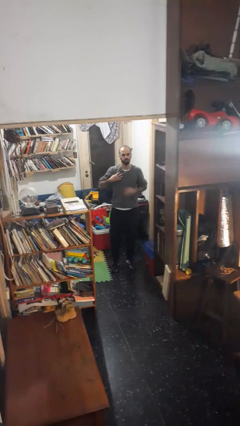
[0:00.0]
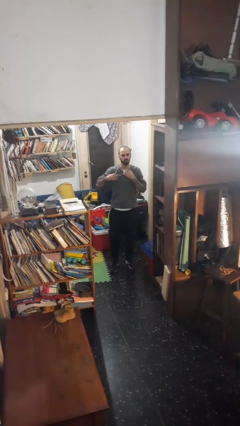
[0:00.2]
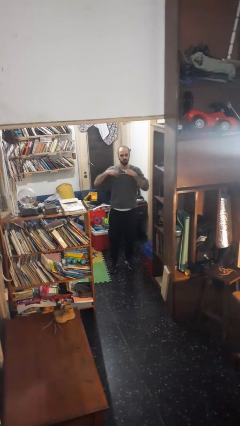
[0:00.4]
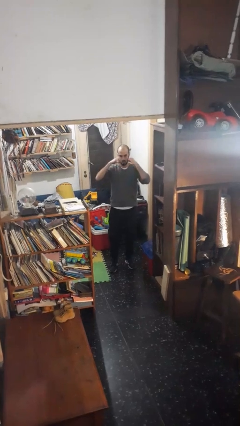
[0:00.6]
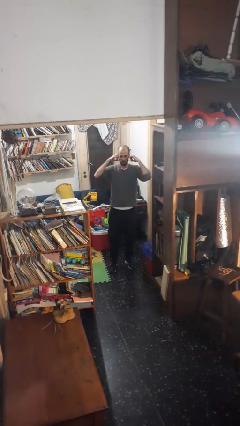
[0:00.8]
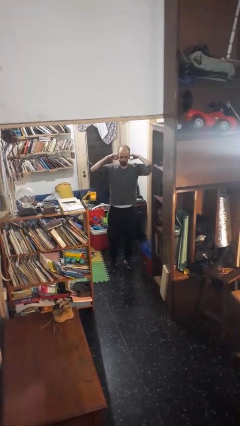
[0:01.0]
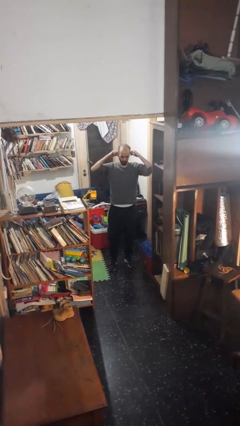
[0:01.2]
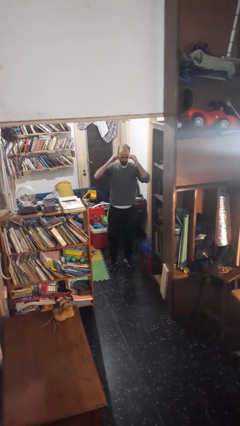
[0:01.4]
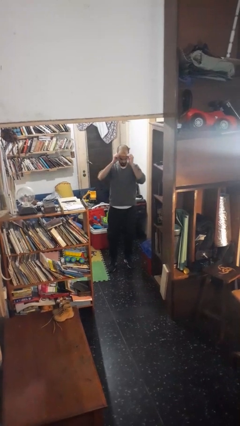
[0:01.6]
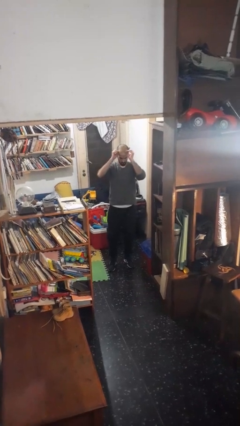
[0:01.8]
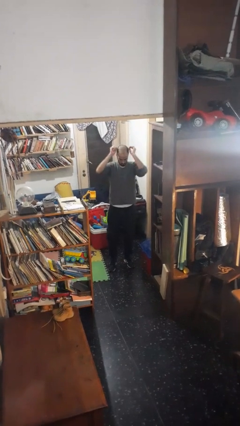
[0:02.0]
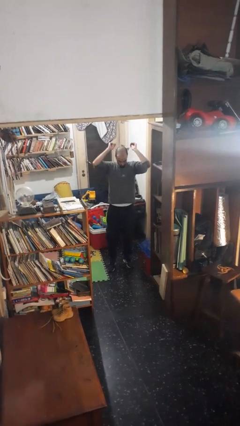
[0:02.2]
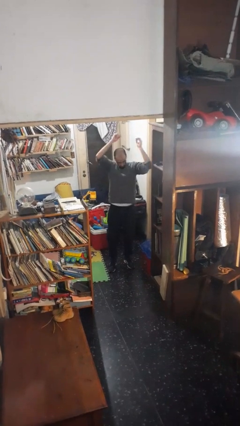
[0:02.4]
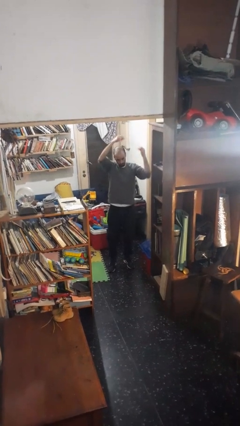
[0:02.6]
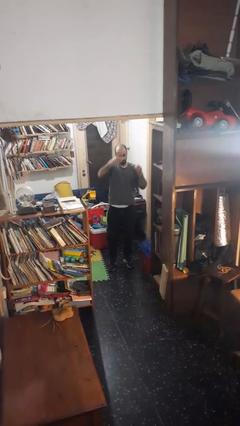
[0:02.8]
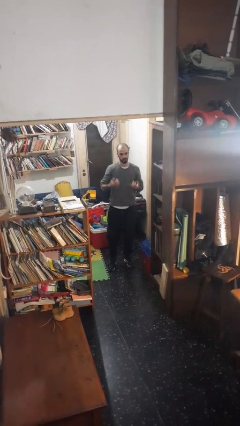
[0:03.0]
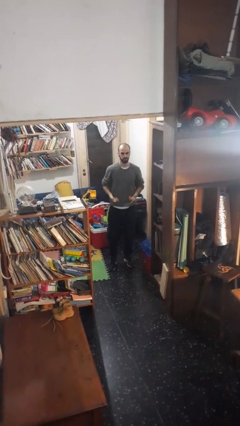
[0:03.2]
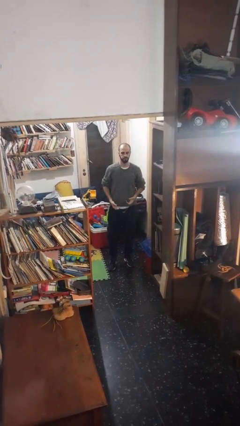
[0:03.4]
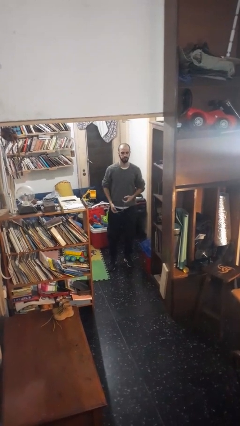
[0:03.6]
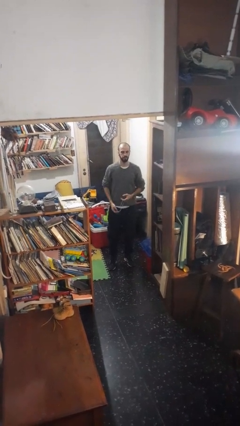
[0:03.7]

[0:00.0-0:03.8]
person takes off necklace

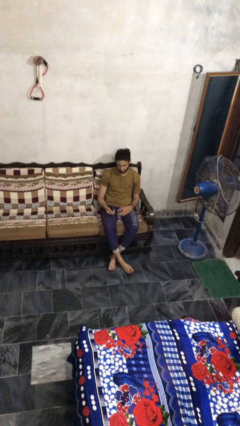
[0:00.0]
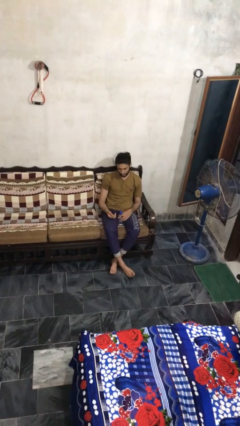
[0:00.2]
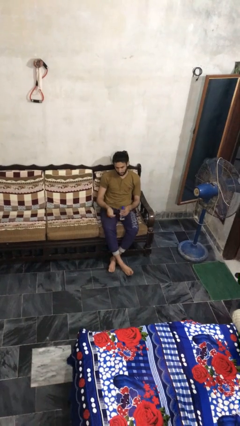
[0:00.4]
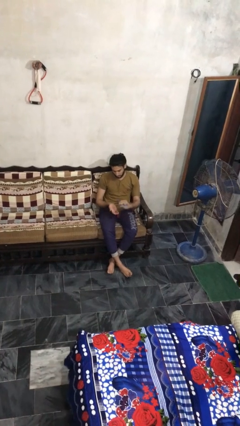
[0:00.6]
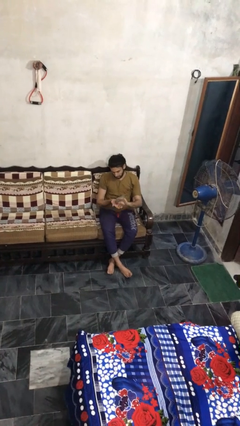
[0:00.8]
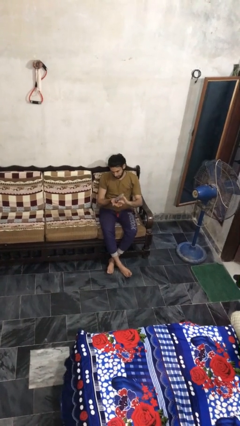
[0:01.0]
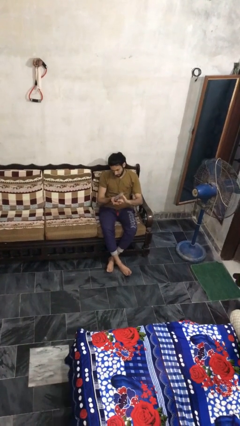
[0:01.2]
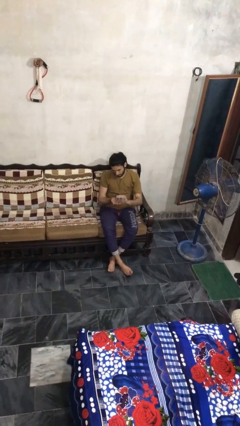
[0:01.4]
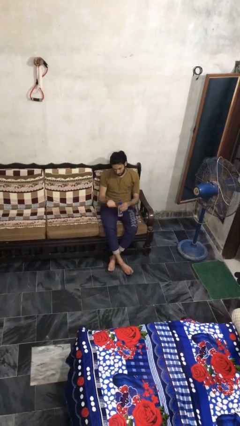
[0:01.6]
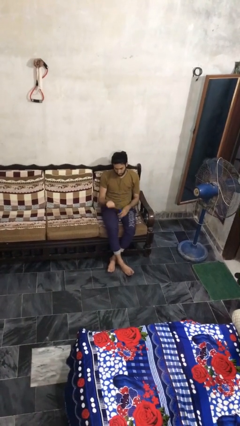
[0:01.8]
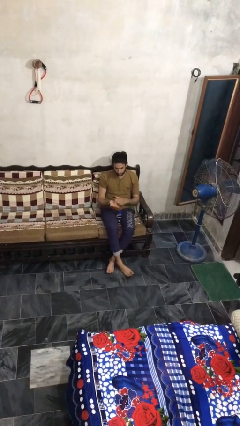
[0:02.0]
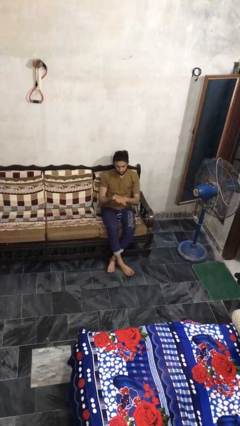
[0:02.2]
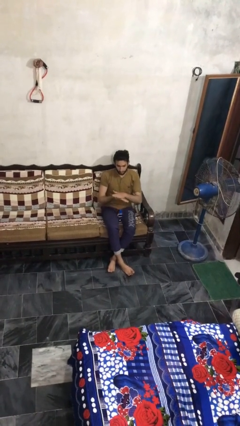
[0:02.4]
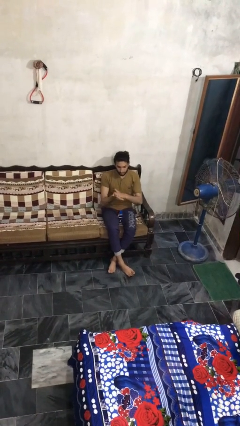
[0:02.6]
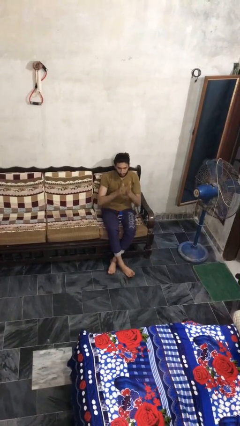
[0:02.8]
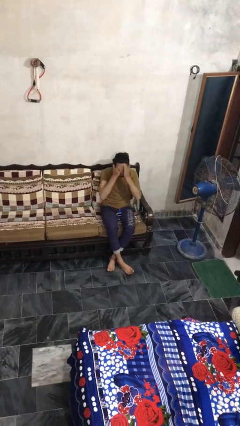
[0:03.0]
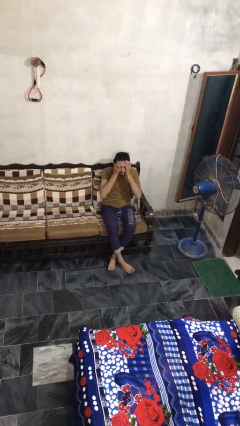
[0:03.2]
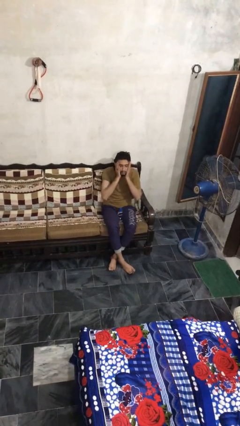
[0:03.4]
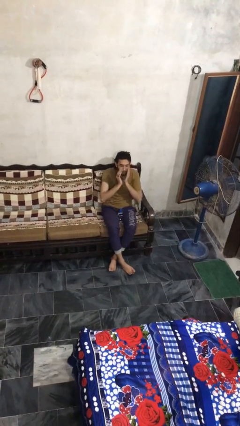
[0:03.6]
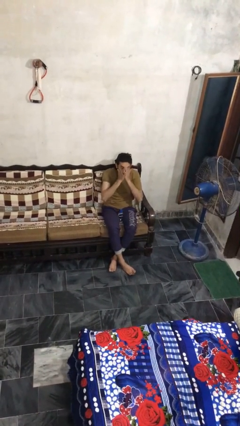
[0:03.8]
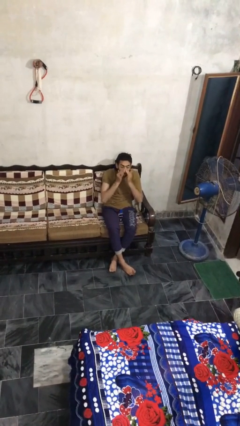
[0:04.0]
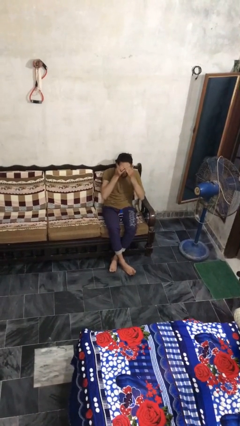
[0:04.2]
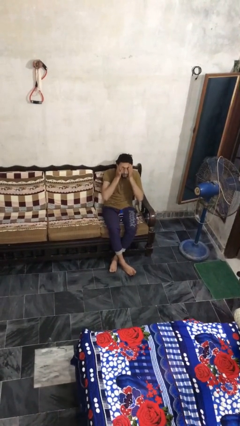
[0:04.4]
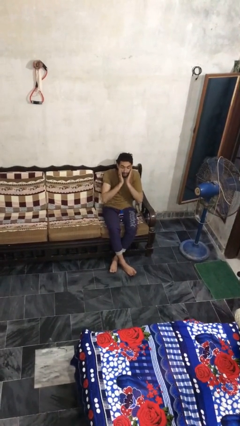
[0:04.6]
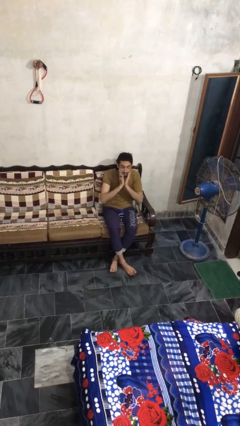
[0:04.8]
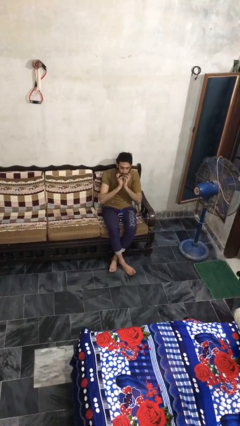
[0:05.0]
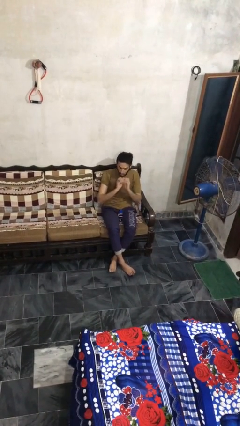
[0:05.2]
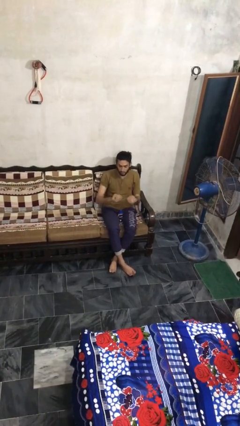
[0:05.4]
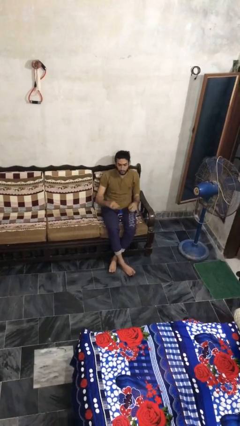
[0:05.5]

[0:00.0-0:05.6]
person applies facial moisturizer

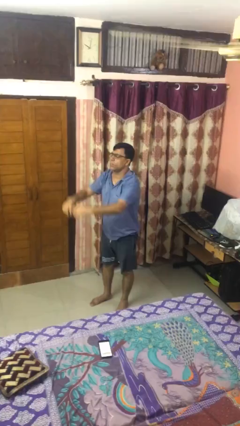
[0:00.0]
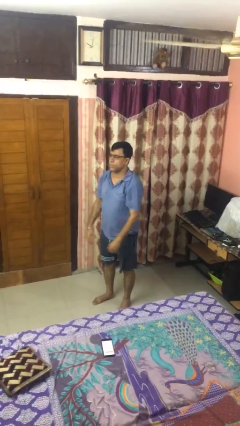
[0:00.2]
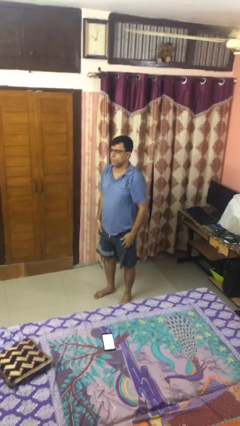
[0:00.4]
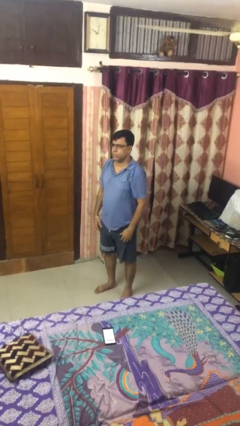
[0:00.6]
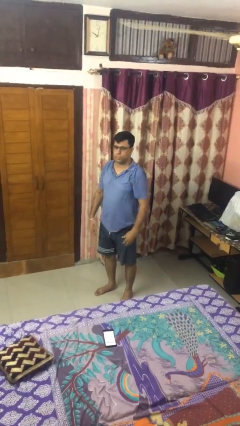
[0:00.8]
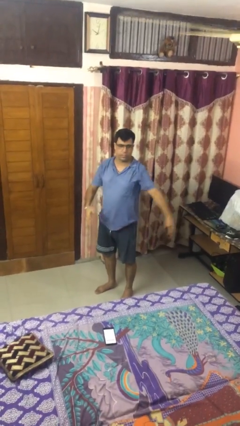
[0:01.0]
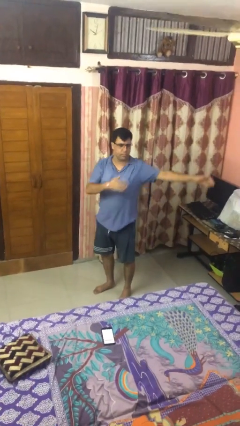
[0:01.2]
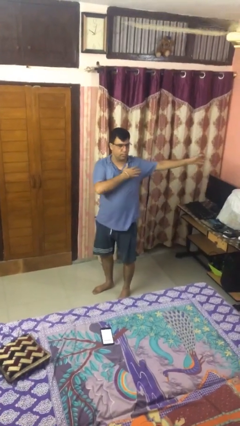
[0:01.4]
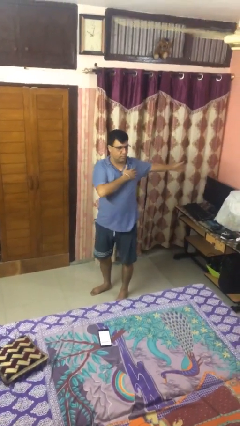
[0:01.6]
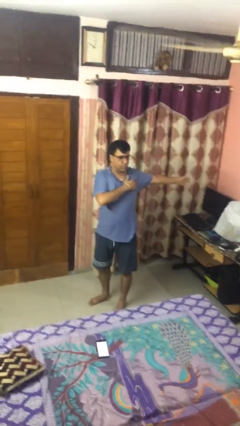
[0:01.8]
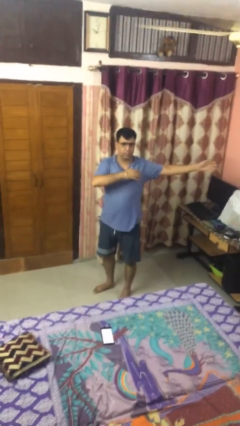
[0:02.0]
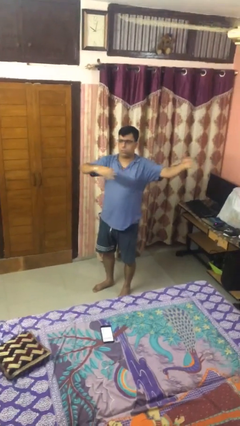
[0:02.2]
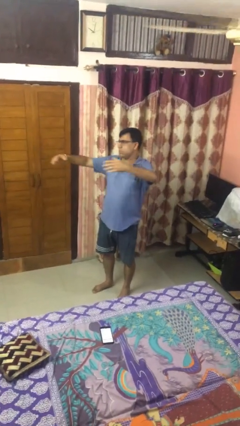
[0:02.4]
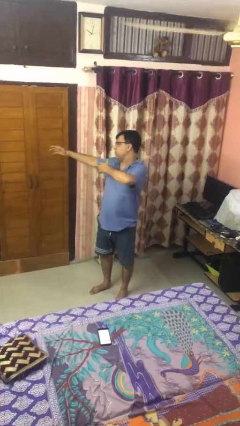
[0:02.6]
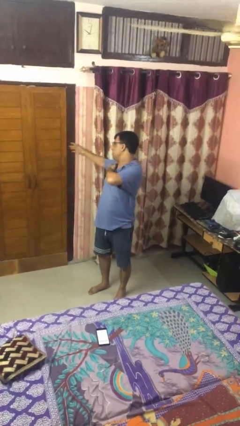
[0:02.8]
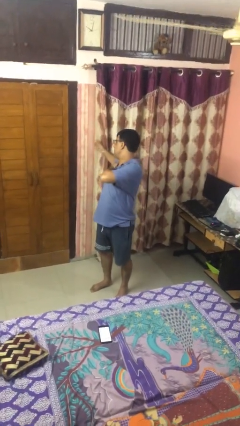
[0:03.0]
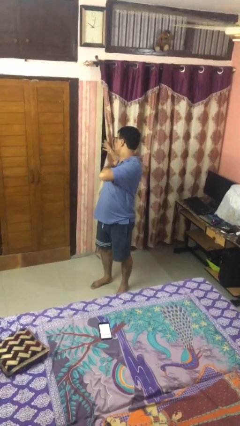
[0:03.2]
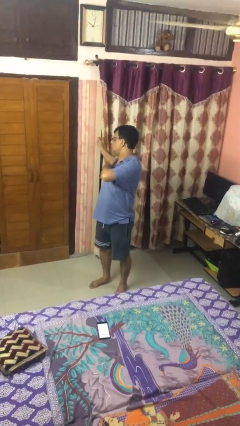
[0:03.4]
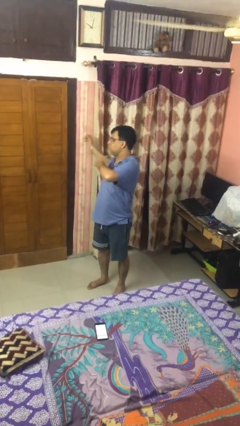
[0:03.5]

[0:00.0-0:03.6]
person stretches arms to side

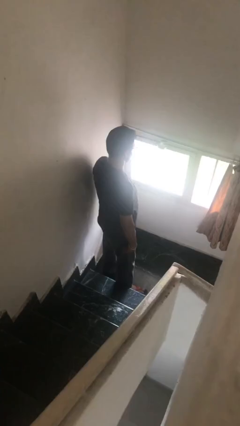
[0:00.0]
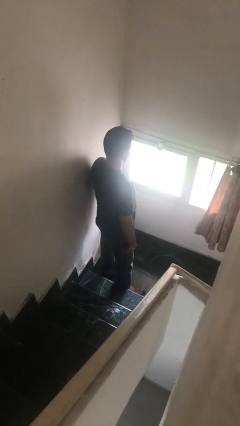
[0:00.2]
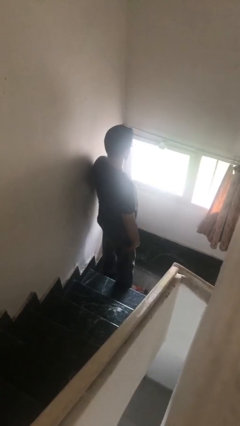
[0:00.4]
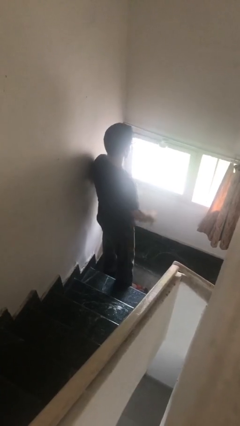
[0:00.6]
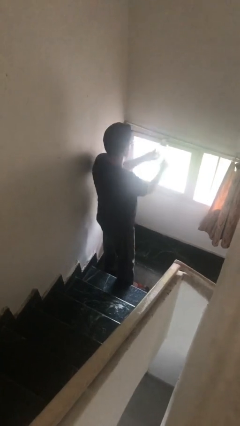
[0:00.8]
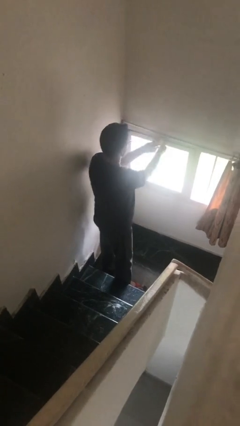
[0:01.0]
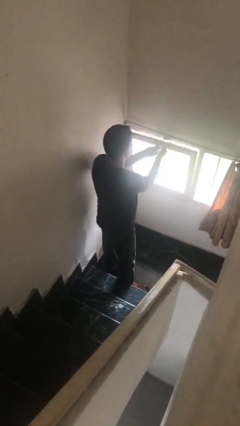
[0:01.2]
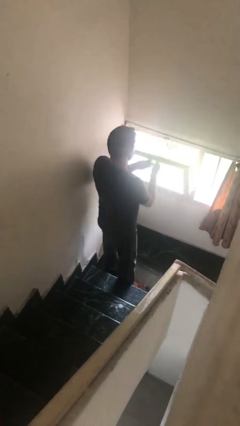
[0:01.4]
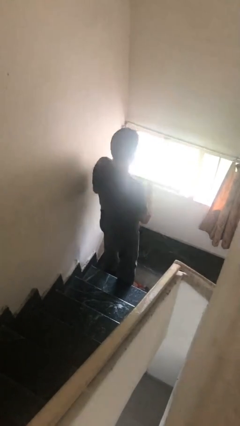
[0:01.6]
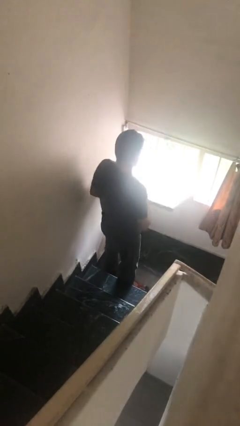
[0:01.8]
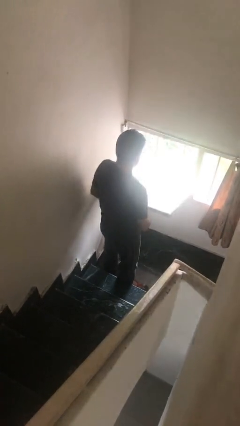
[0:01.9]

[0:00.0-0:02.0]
person opens home window

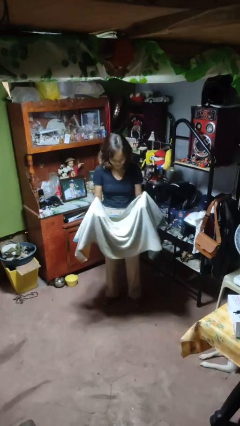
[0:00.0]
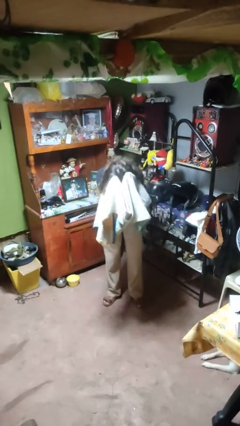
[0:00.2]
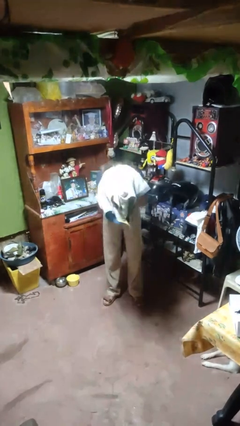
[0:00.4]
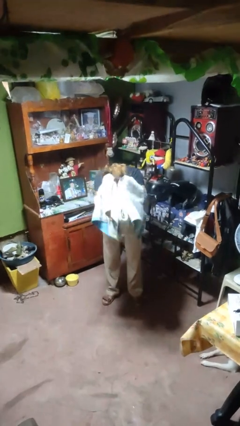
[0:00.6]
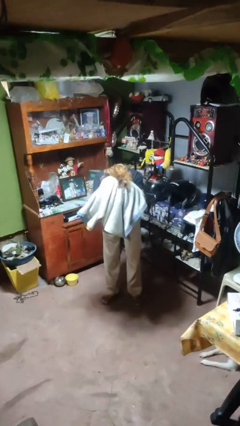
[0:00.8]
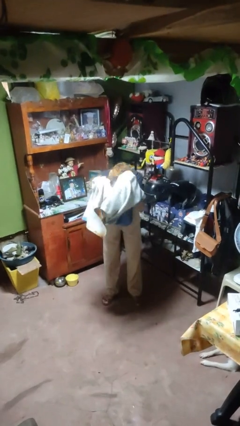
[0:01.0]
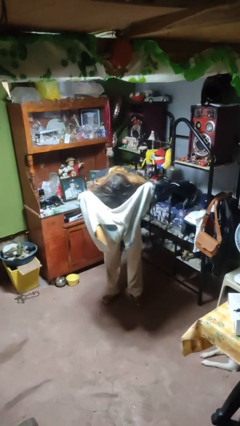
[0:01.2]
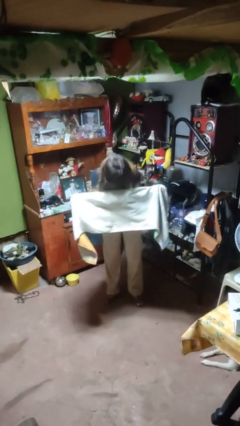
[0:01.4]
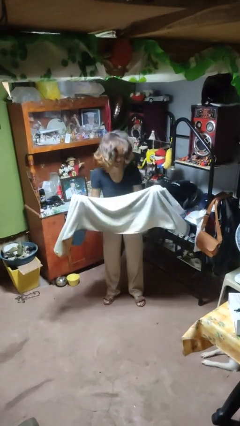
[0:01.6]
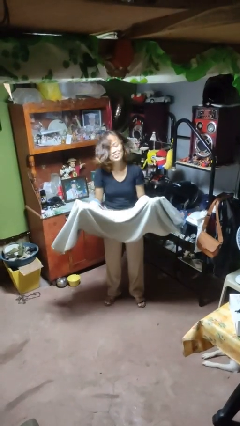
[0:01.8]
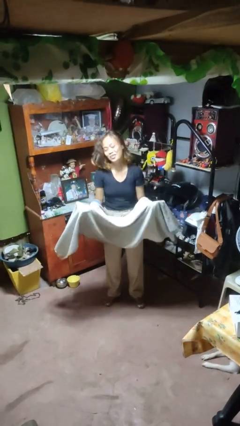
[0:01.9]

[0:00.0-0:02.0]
person dries hair with towel

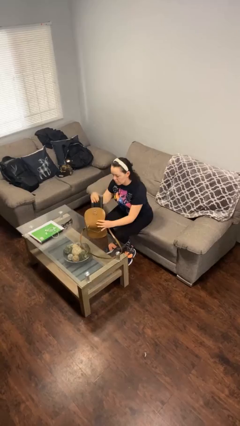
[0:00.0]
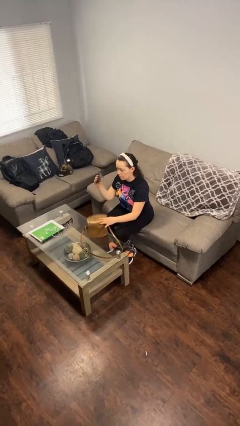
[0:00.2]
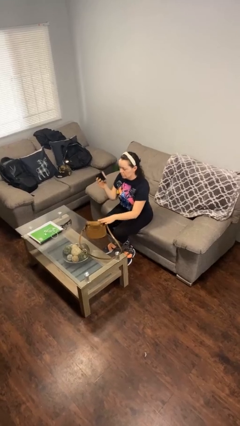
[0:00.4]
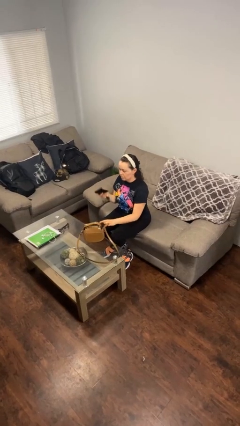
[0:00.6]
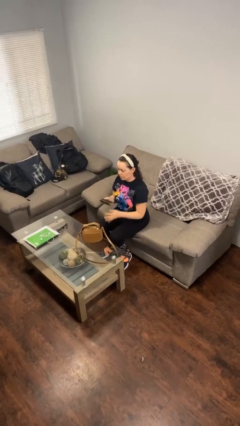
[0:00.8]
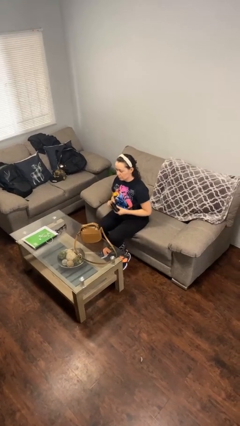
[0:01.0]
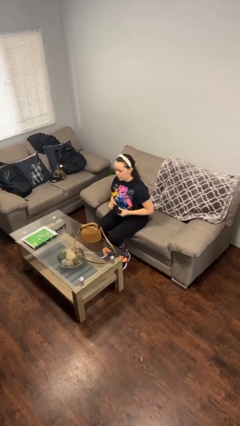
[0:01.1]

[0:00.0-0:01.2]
person takes object from purse
